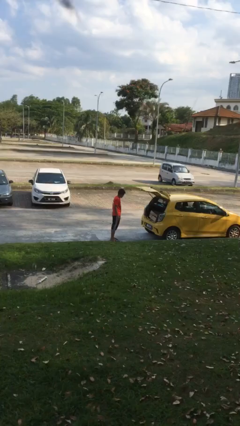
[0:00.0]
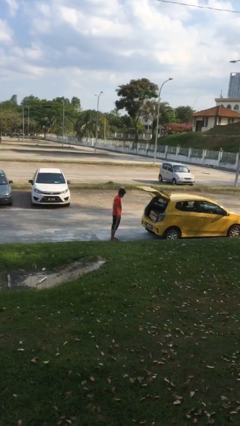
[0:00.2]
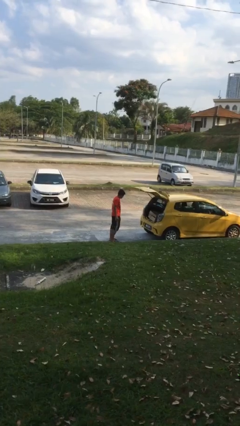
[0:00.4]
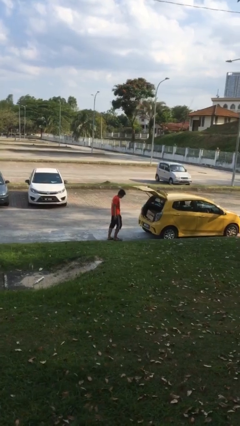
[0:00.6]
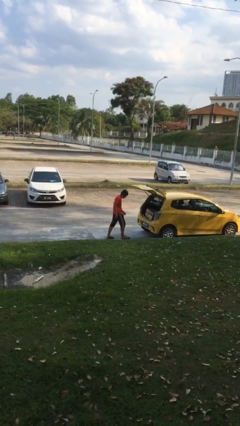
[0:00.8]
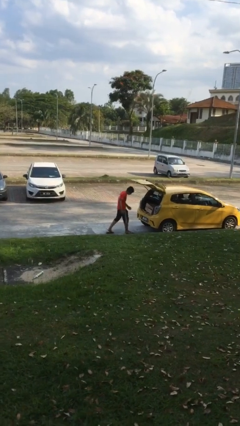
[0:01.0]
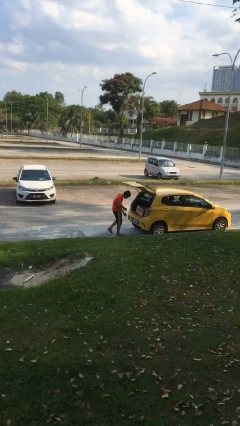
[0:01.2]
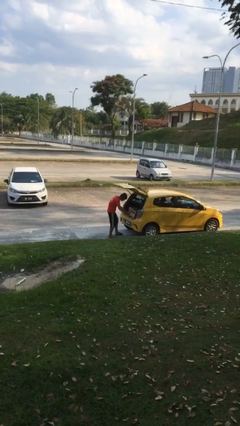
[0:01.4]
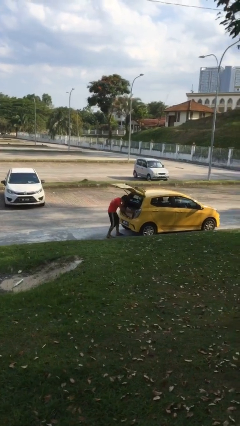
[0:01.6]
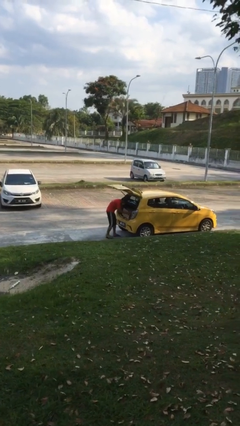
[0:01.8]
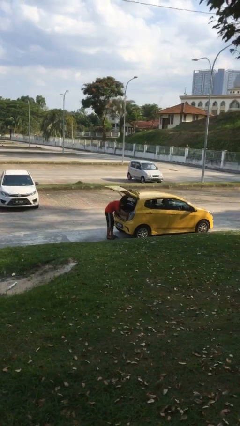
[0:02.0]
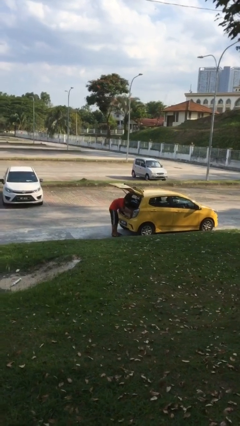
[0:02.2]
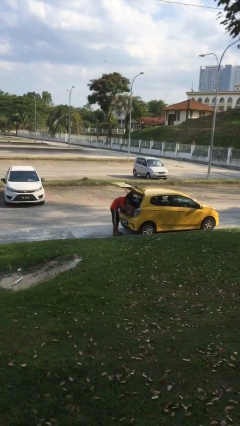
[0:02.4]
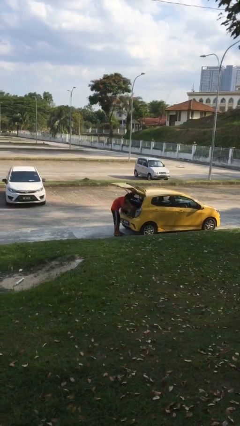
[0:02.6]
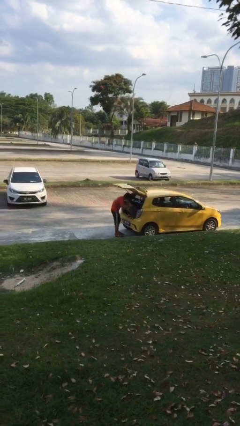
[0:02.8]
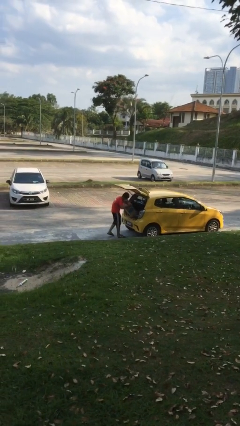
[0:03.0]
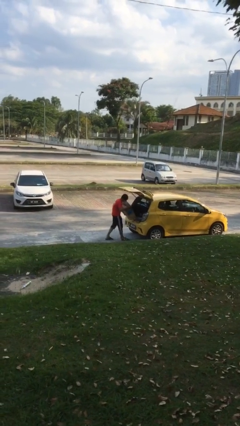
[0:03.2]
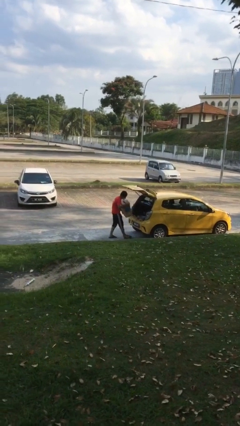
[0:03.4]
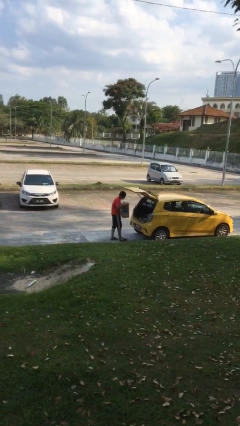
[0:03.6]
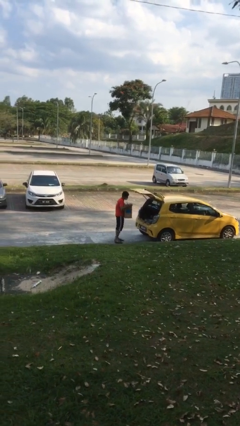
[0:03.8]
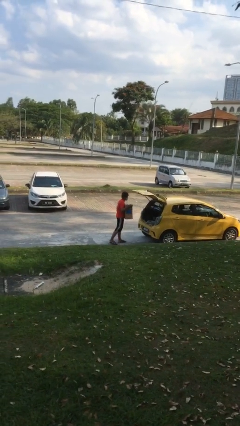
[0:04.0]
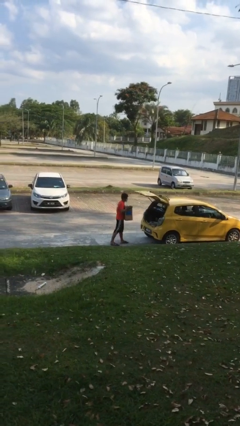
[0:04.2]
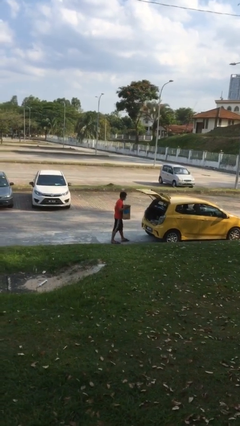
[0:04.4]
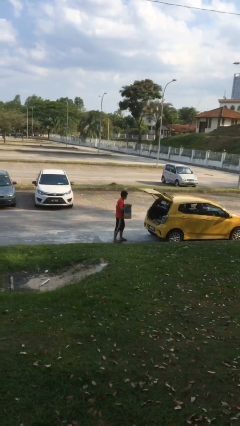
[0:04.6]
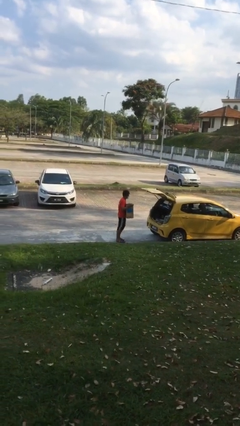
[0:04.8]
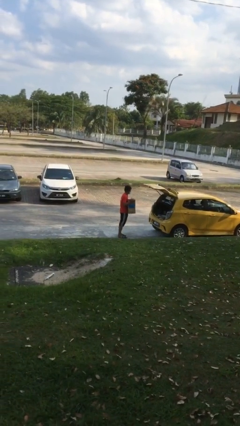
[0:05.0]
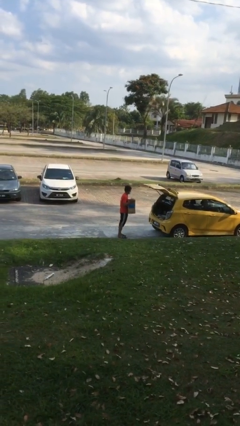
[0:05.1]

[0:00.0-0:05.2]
person unloads car

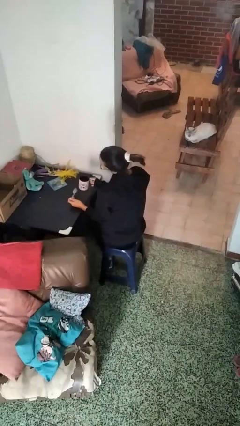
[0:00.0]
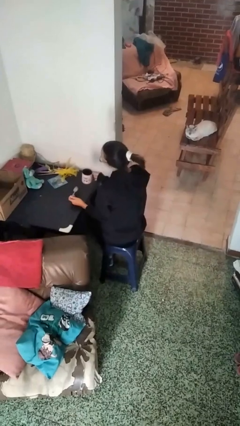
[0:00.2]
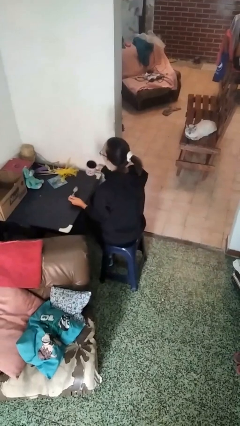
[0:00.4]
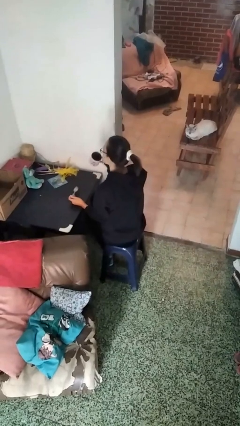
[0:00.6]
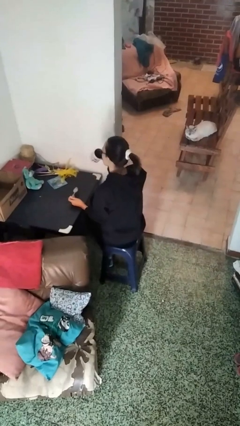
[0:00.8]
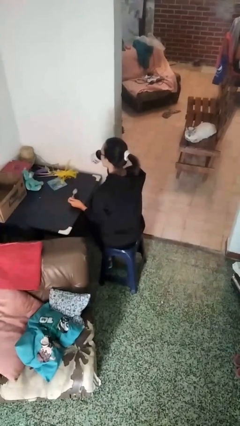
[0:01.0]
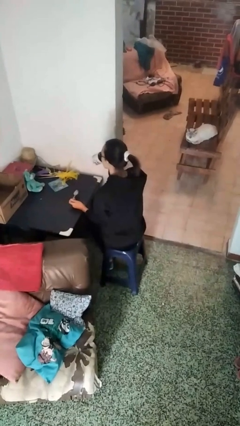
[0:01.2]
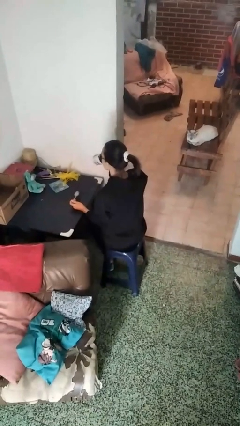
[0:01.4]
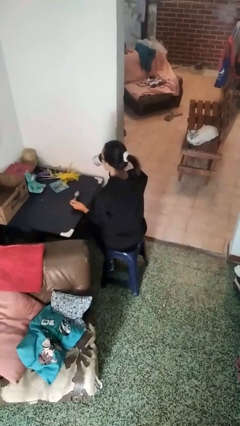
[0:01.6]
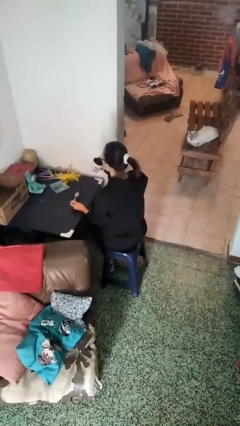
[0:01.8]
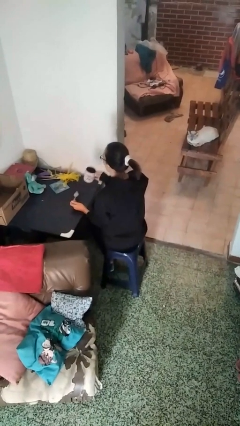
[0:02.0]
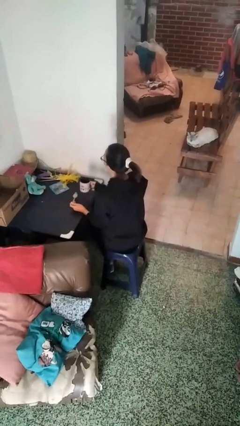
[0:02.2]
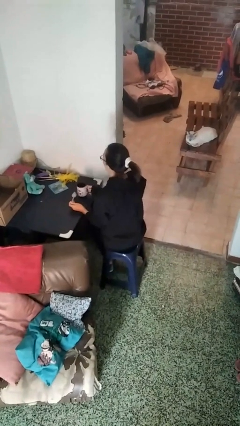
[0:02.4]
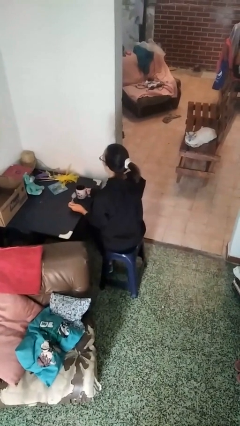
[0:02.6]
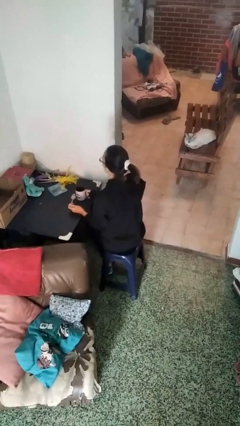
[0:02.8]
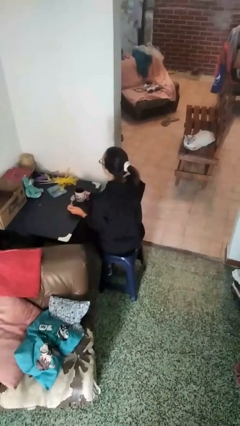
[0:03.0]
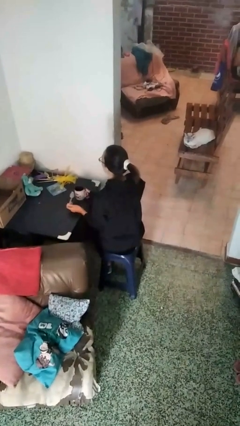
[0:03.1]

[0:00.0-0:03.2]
person drinks from mug

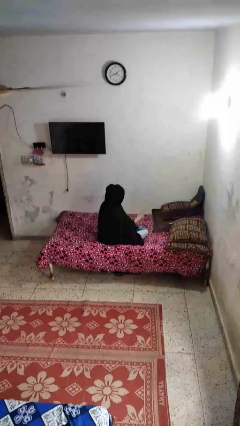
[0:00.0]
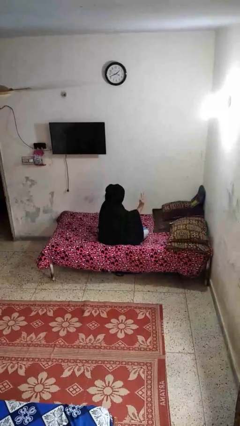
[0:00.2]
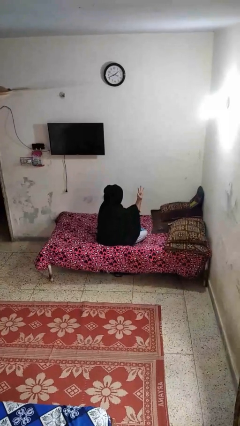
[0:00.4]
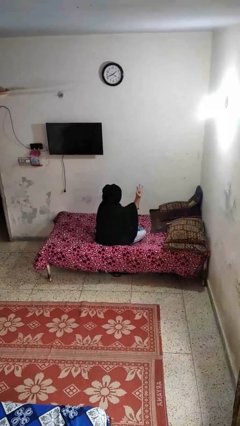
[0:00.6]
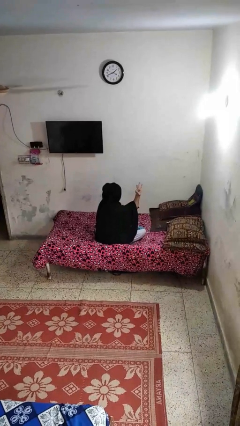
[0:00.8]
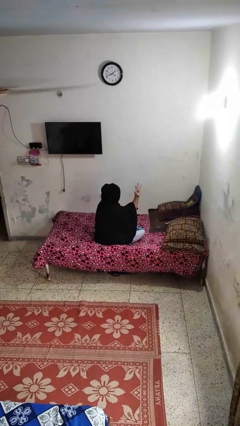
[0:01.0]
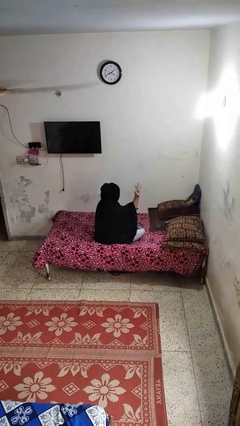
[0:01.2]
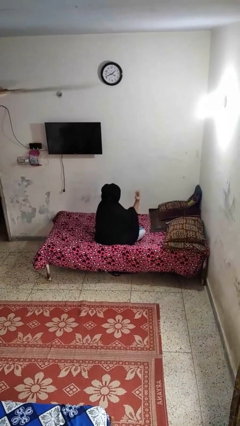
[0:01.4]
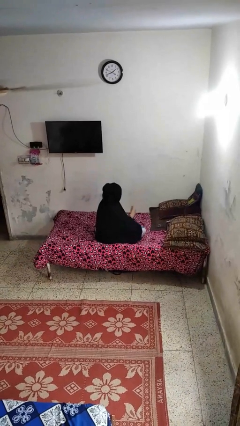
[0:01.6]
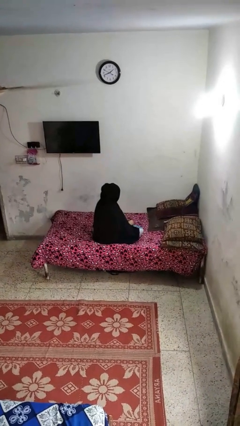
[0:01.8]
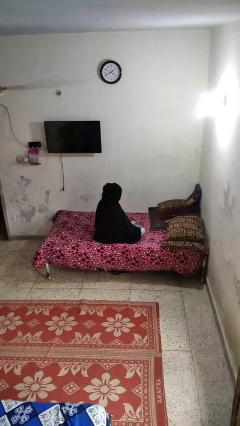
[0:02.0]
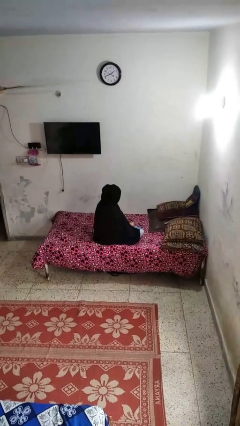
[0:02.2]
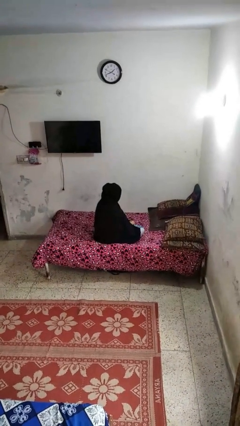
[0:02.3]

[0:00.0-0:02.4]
person gestures number three

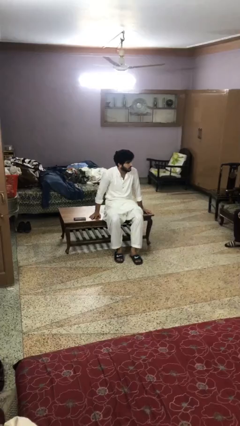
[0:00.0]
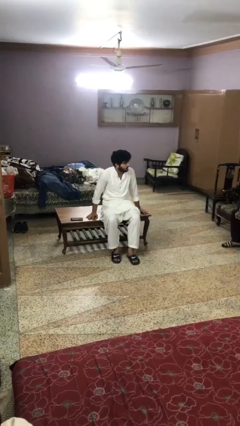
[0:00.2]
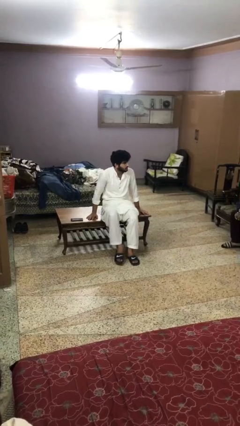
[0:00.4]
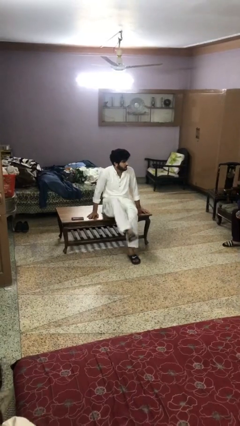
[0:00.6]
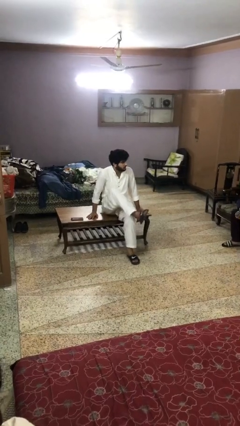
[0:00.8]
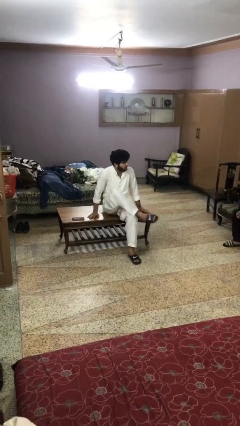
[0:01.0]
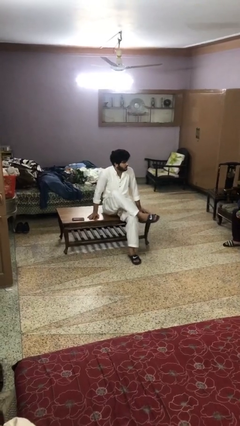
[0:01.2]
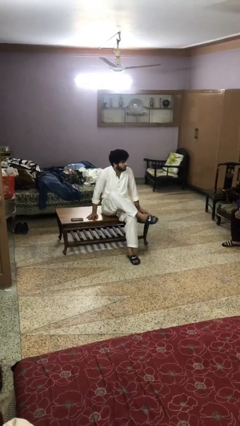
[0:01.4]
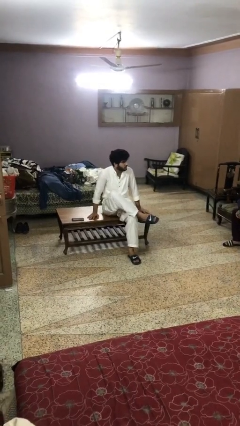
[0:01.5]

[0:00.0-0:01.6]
person crosses legs

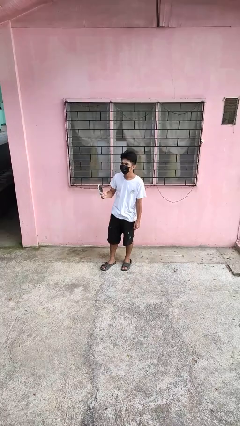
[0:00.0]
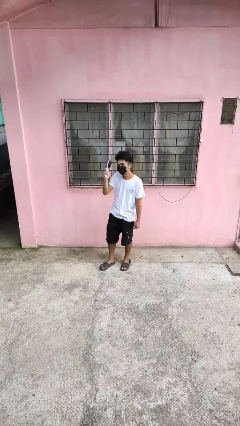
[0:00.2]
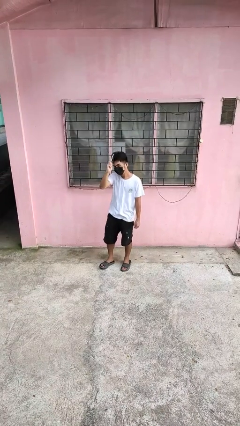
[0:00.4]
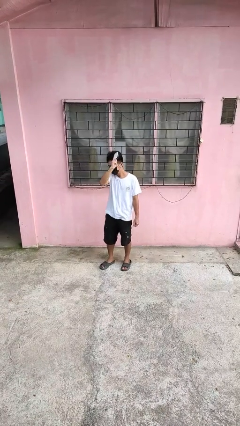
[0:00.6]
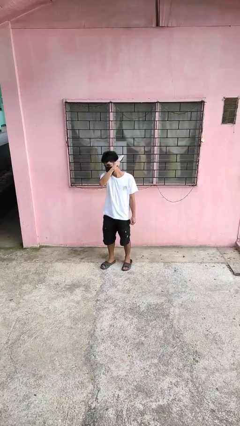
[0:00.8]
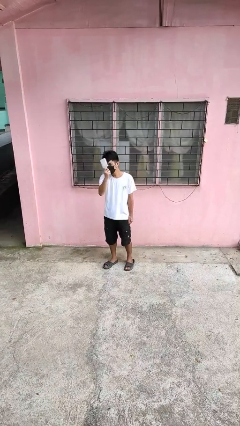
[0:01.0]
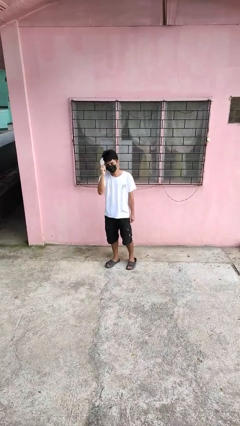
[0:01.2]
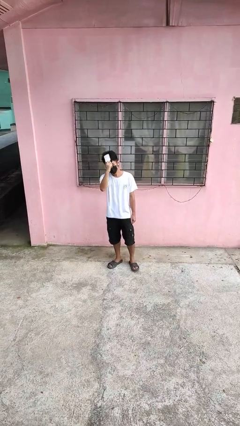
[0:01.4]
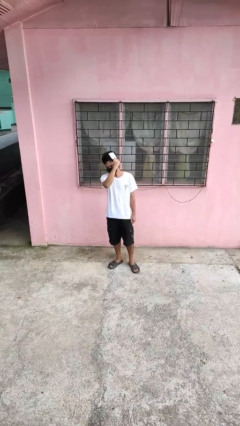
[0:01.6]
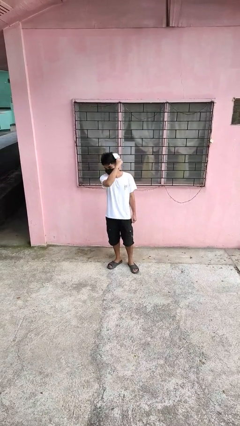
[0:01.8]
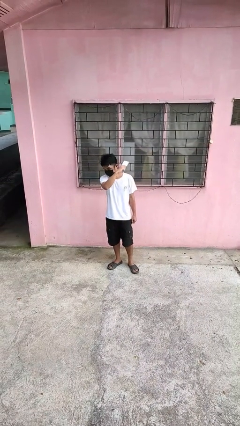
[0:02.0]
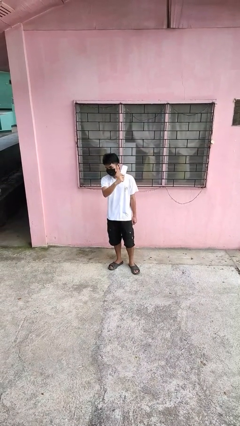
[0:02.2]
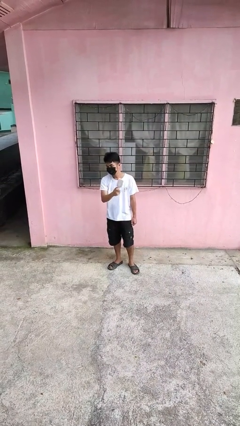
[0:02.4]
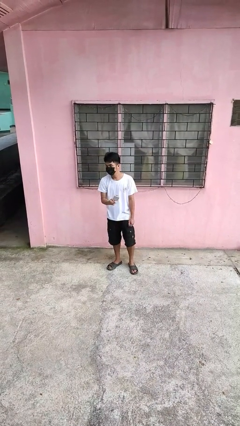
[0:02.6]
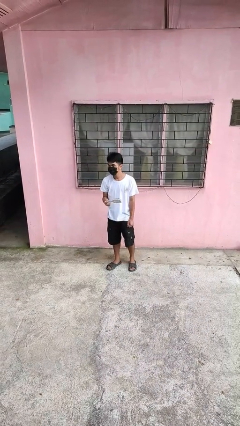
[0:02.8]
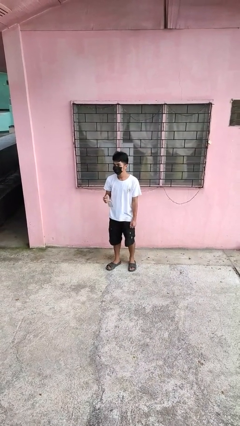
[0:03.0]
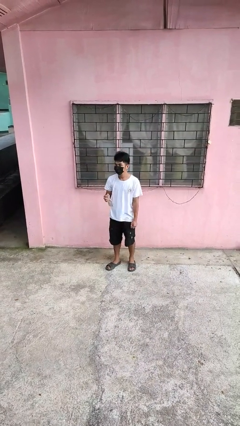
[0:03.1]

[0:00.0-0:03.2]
person brushes hair

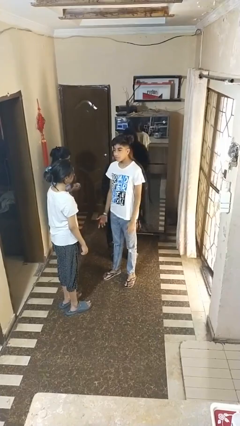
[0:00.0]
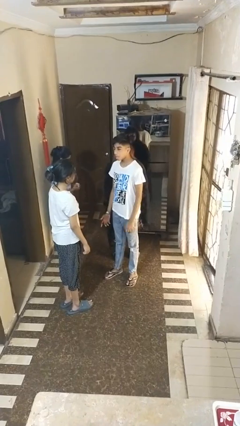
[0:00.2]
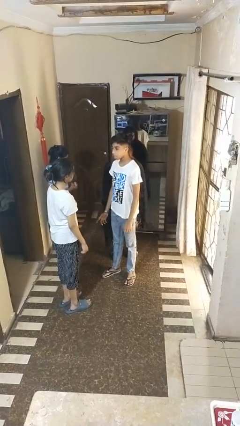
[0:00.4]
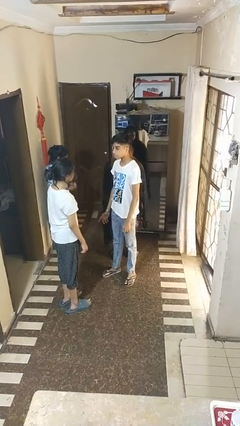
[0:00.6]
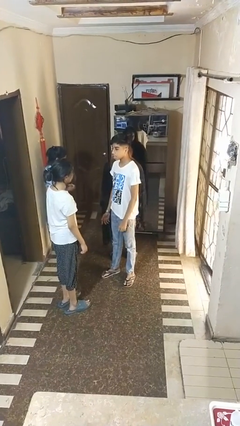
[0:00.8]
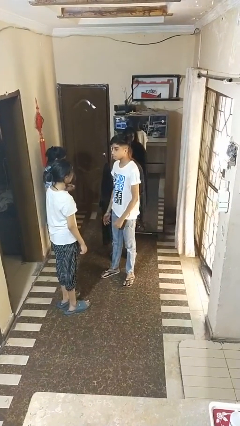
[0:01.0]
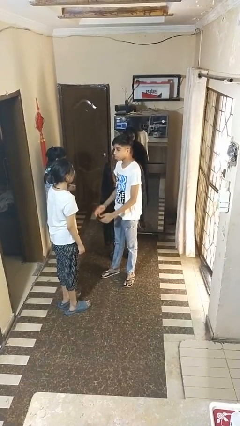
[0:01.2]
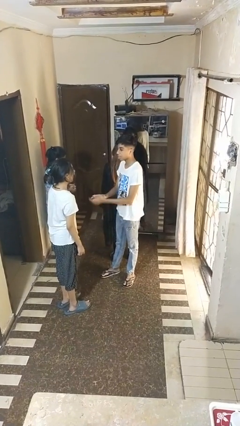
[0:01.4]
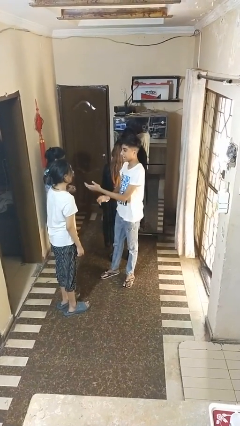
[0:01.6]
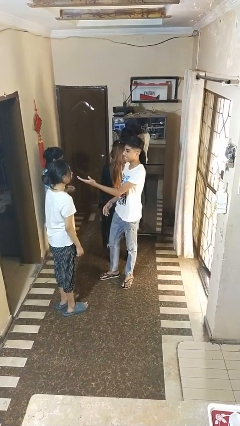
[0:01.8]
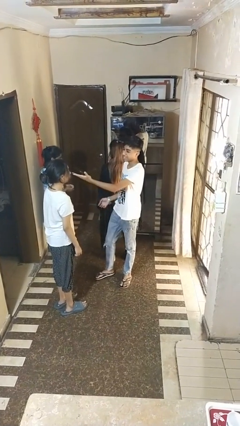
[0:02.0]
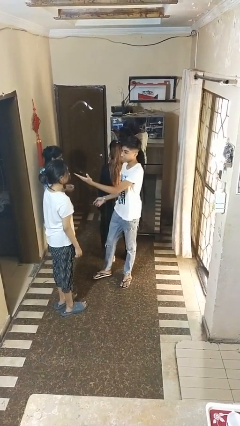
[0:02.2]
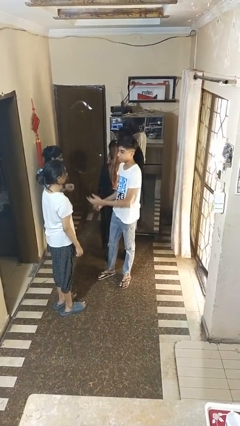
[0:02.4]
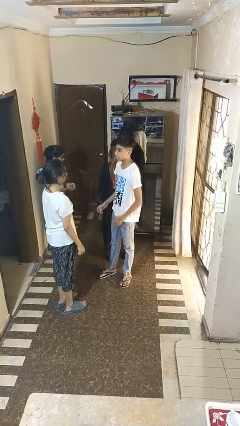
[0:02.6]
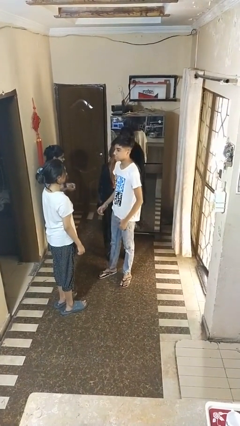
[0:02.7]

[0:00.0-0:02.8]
person laughs with person
